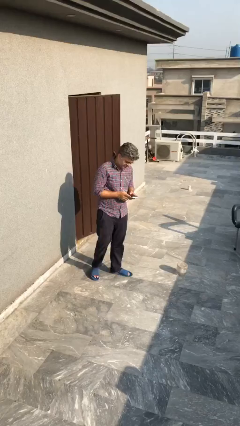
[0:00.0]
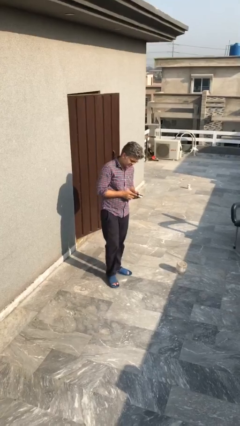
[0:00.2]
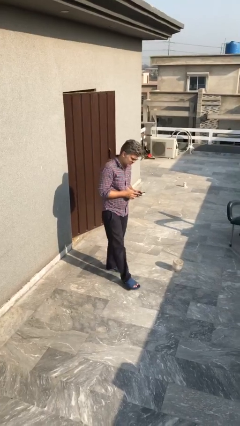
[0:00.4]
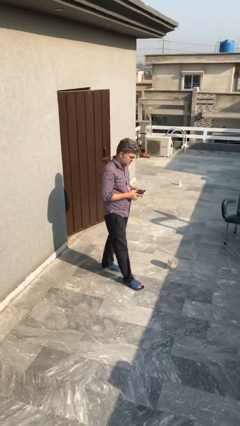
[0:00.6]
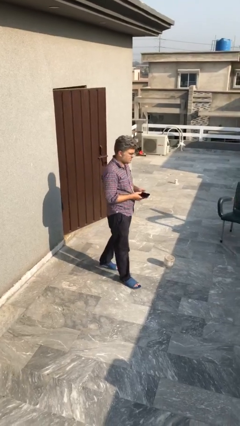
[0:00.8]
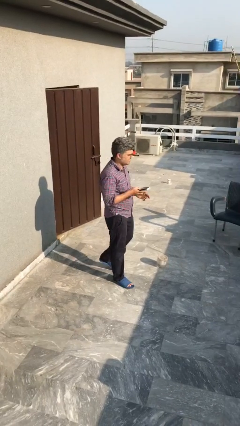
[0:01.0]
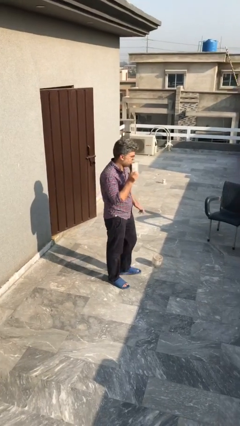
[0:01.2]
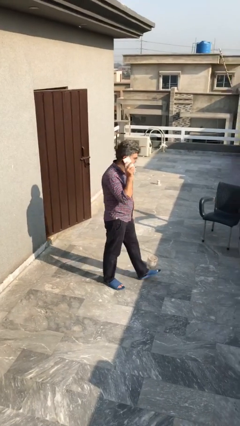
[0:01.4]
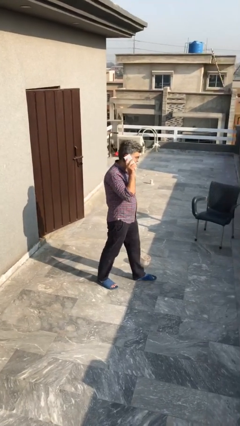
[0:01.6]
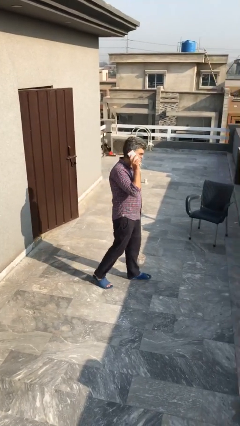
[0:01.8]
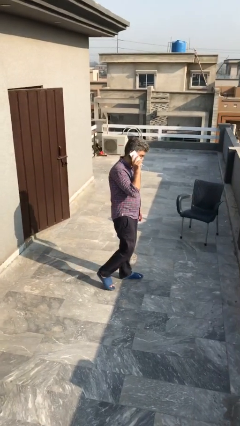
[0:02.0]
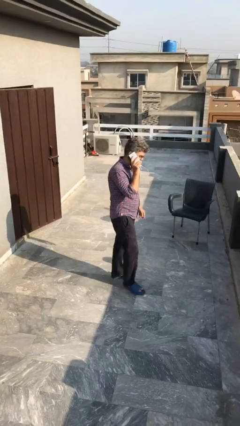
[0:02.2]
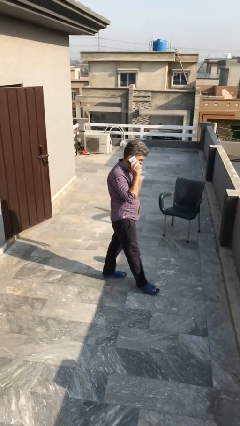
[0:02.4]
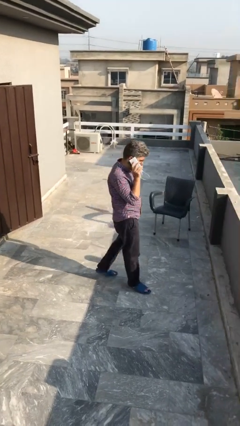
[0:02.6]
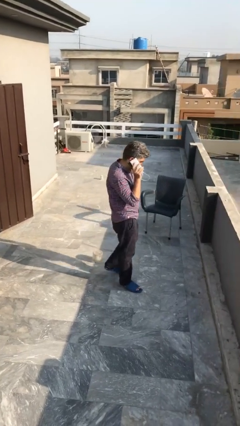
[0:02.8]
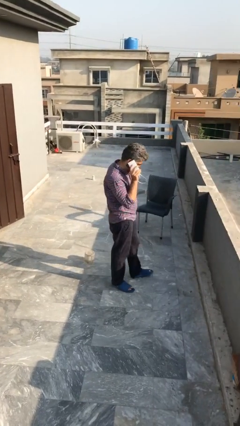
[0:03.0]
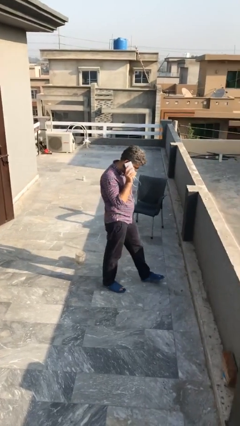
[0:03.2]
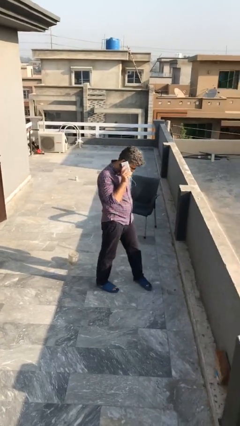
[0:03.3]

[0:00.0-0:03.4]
person talks on phone

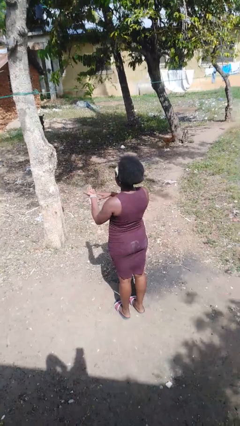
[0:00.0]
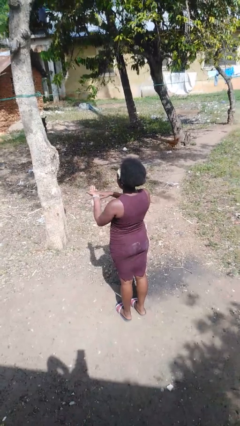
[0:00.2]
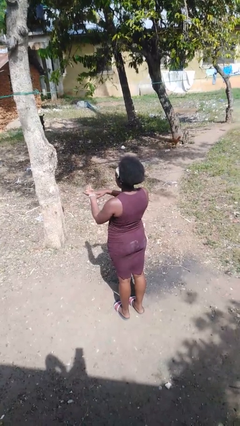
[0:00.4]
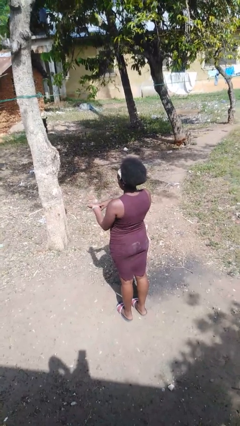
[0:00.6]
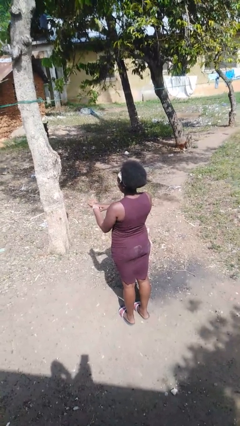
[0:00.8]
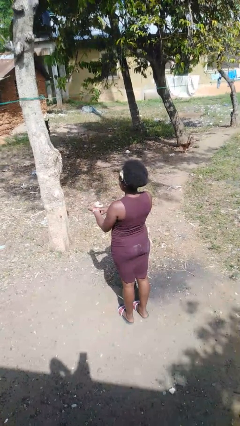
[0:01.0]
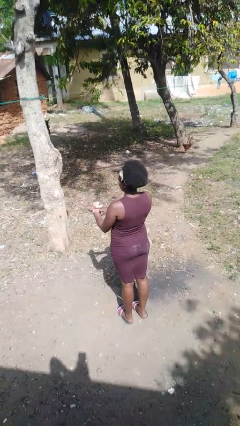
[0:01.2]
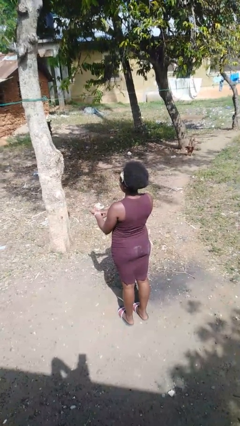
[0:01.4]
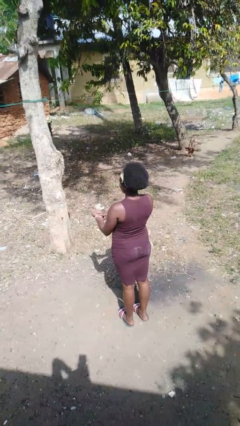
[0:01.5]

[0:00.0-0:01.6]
person gestures hang loose

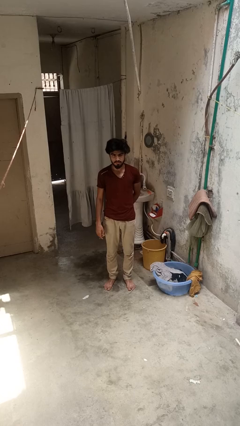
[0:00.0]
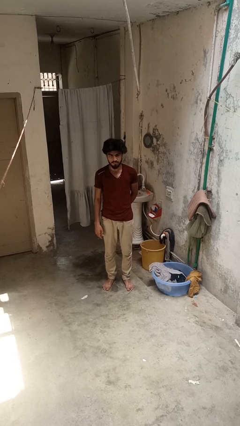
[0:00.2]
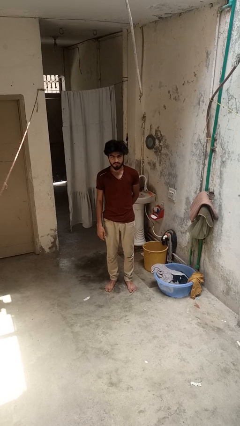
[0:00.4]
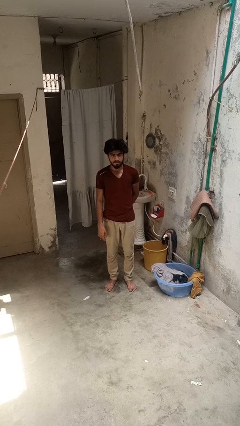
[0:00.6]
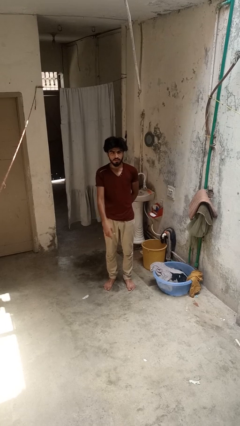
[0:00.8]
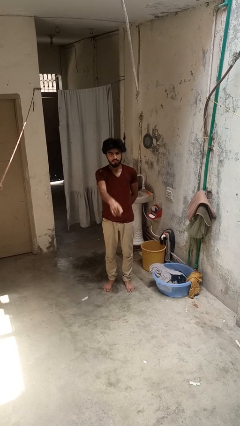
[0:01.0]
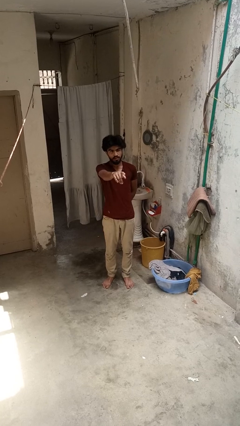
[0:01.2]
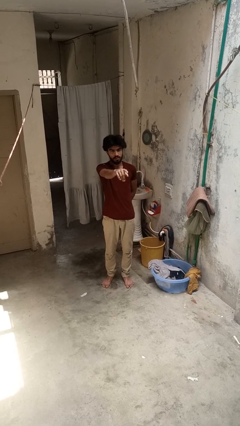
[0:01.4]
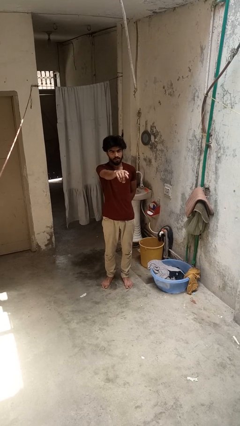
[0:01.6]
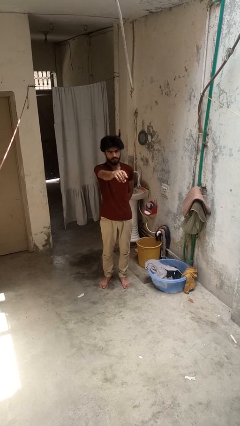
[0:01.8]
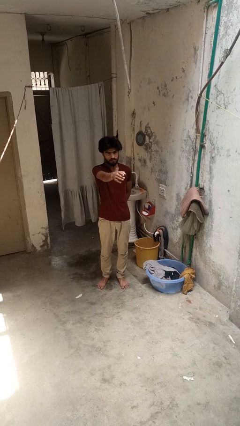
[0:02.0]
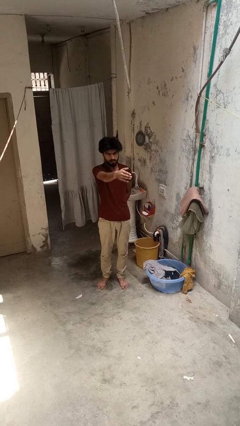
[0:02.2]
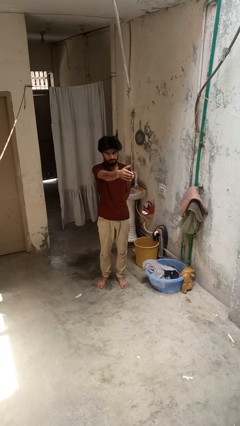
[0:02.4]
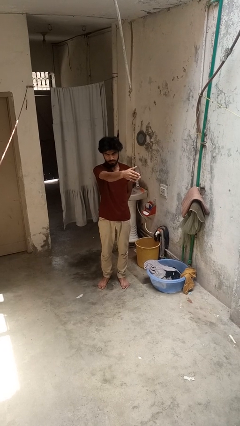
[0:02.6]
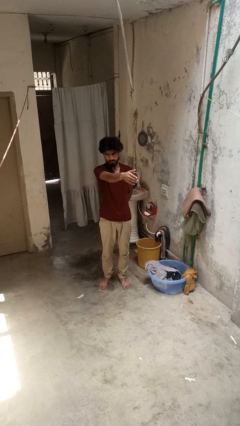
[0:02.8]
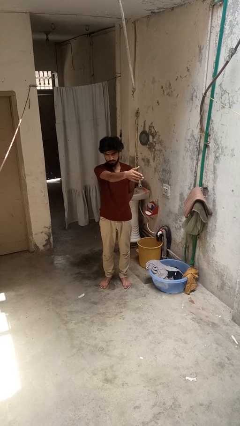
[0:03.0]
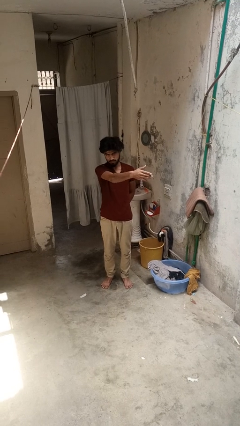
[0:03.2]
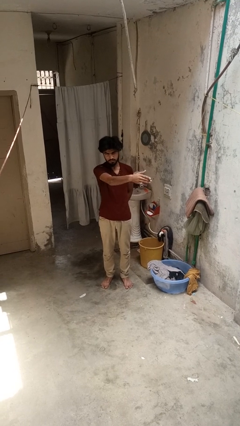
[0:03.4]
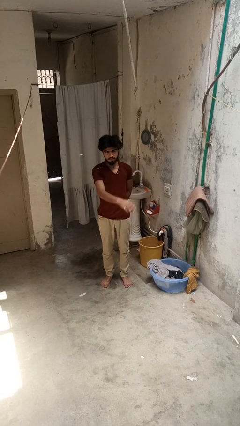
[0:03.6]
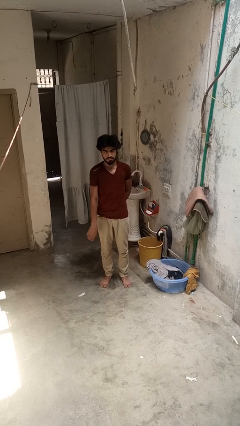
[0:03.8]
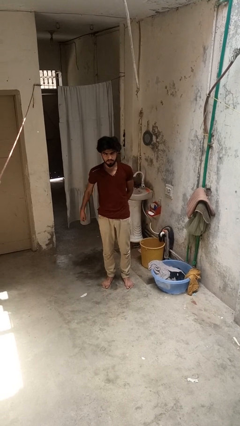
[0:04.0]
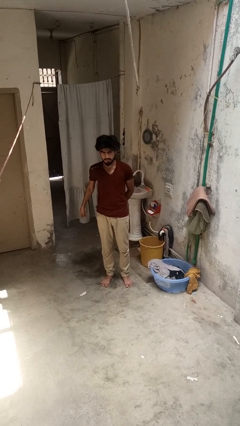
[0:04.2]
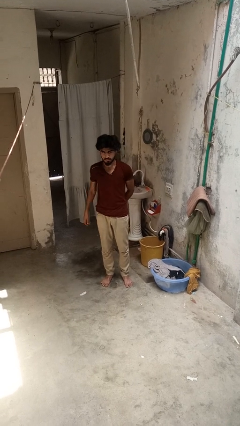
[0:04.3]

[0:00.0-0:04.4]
person gestures swipe left

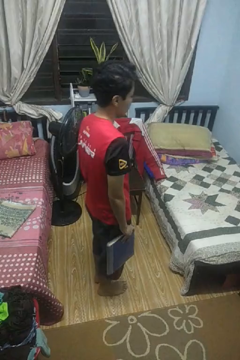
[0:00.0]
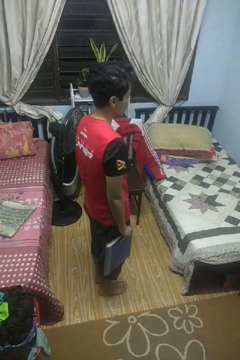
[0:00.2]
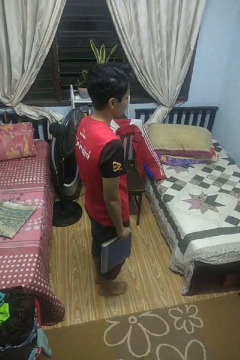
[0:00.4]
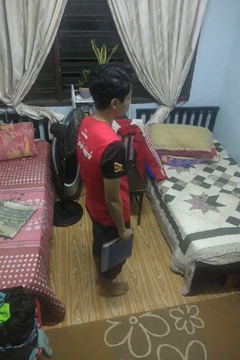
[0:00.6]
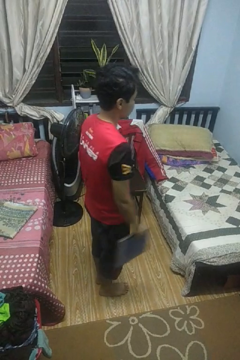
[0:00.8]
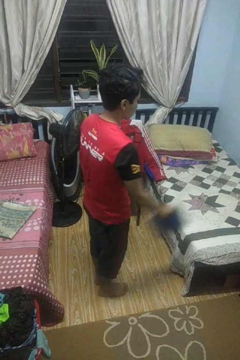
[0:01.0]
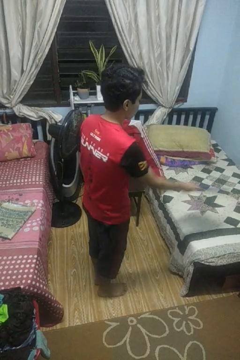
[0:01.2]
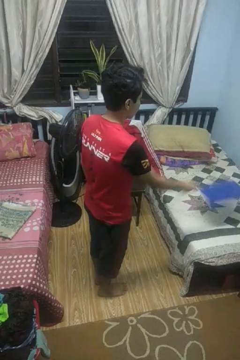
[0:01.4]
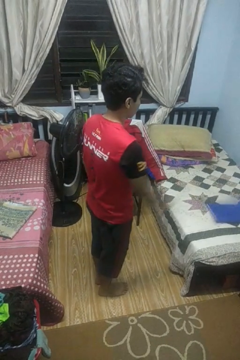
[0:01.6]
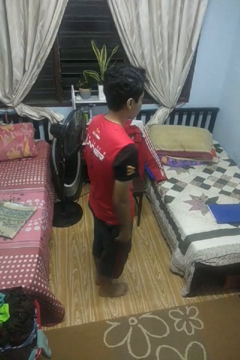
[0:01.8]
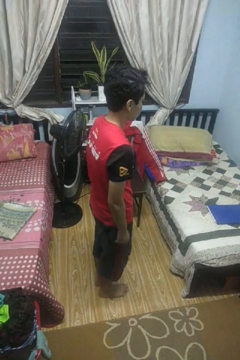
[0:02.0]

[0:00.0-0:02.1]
person throws object on bed

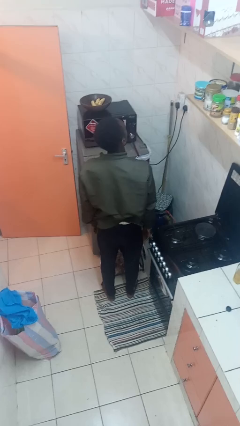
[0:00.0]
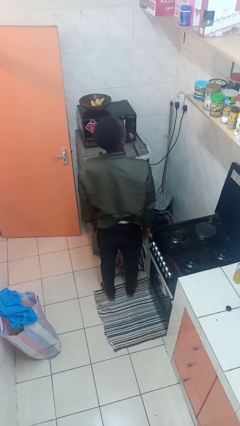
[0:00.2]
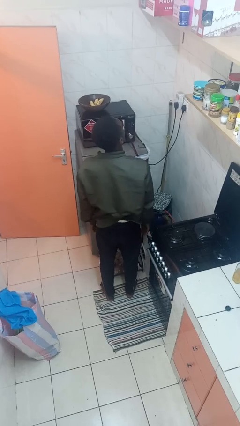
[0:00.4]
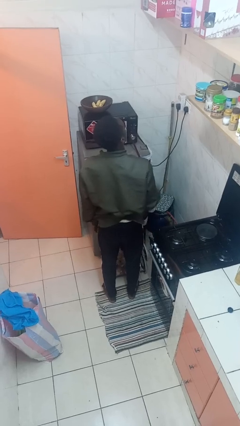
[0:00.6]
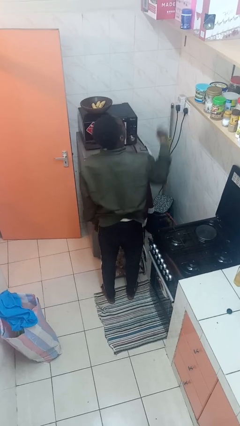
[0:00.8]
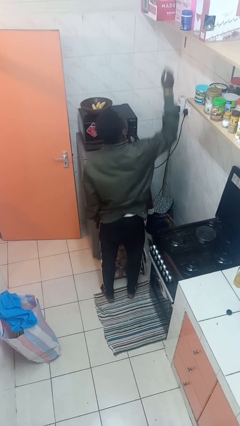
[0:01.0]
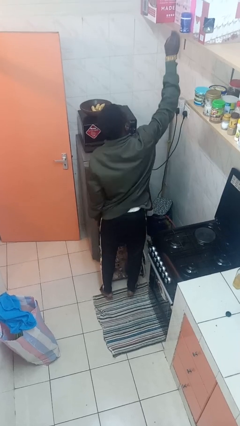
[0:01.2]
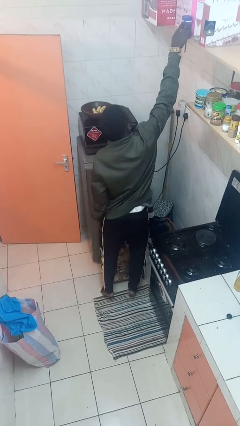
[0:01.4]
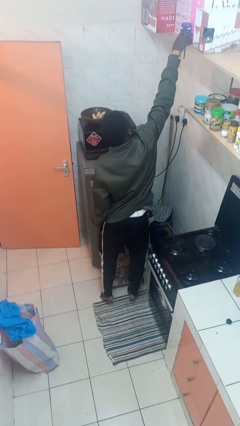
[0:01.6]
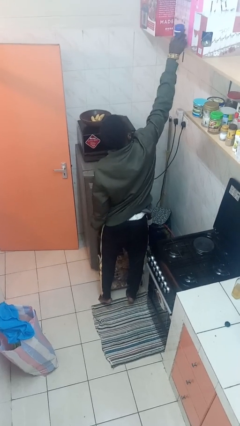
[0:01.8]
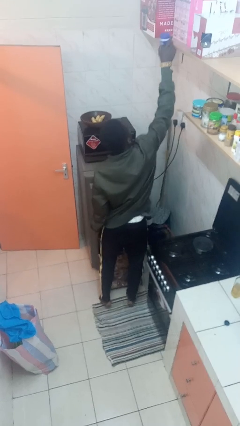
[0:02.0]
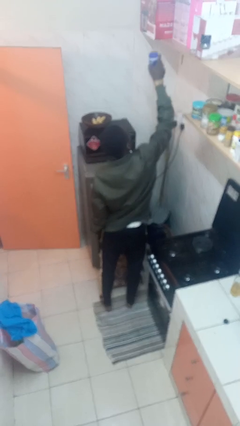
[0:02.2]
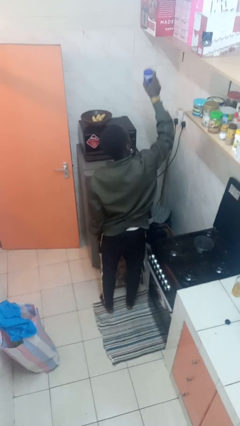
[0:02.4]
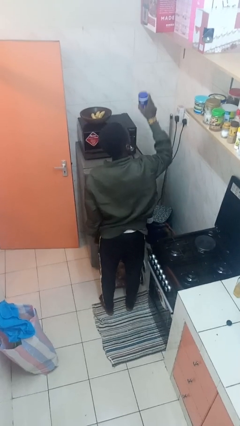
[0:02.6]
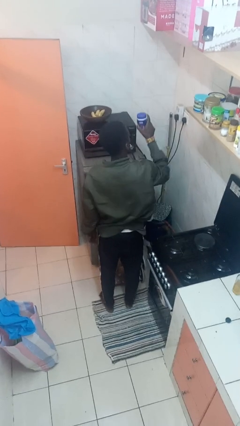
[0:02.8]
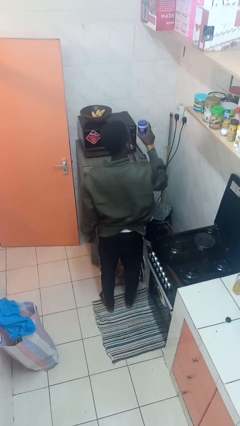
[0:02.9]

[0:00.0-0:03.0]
person picks up object from shelf

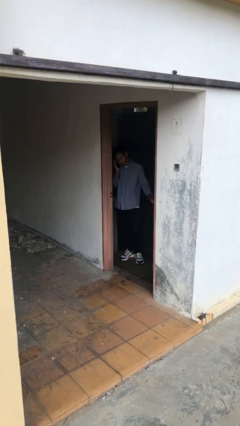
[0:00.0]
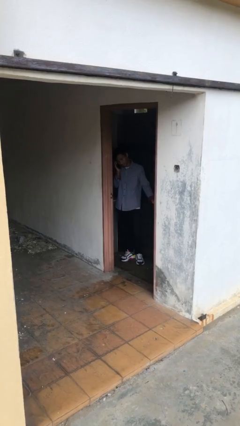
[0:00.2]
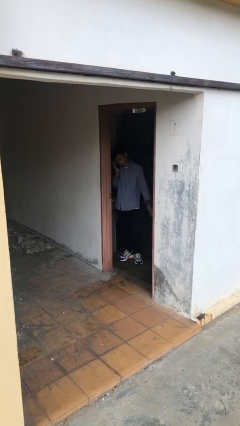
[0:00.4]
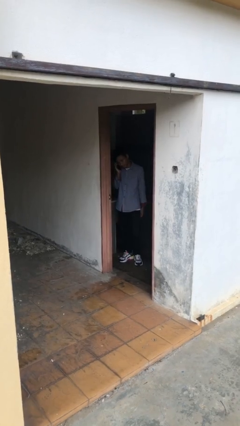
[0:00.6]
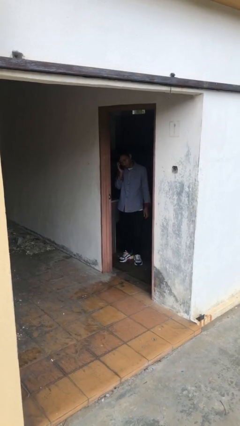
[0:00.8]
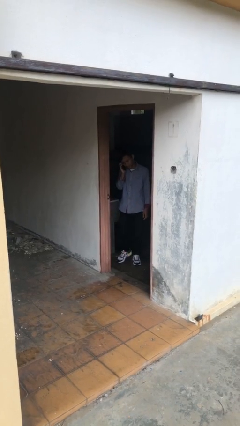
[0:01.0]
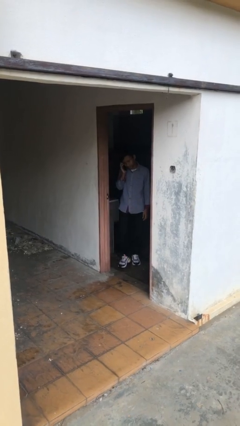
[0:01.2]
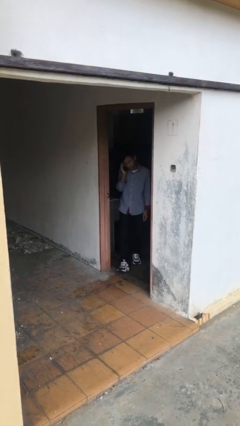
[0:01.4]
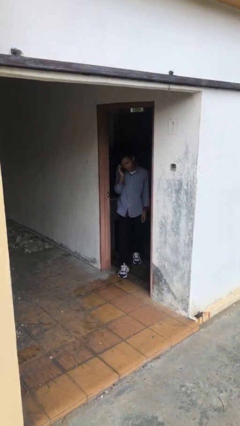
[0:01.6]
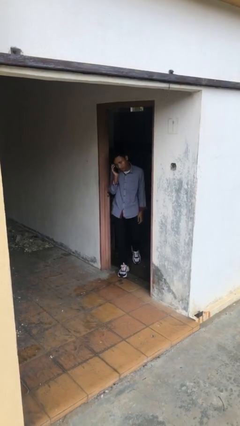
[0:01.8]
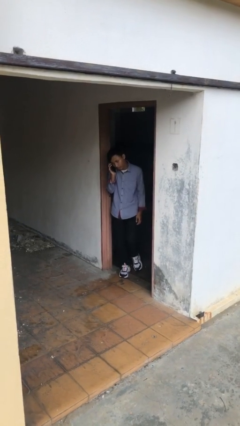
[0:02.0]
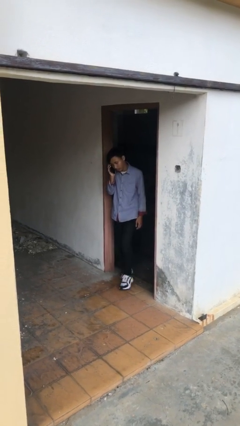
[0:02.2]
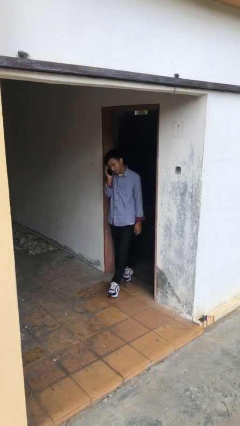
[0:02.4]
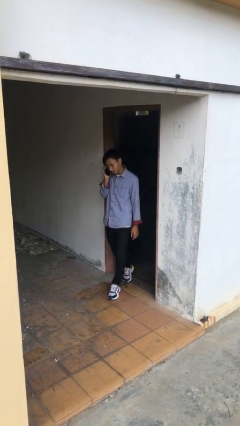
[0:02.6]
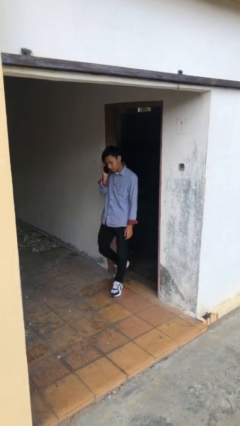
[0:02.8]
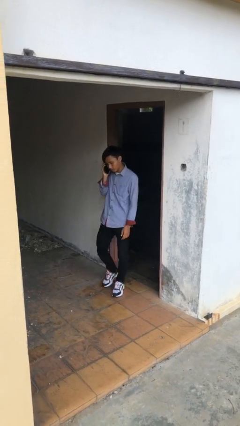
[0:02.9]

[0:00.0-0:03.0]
person enters scene through structure
